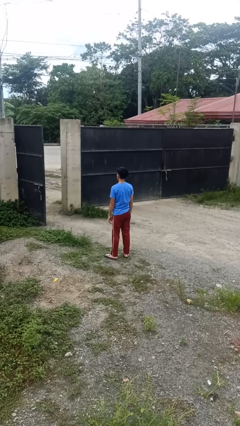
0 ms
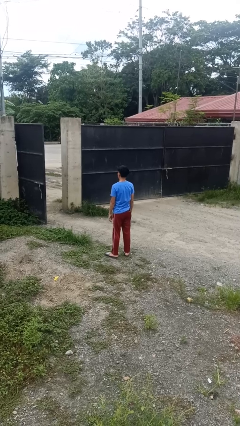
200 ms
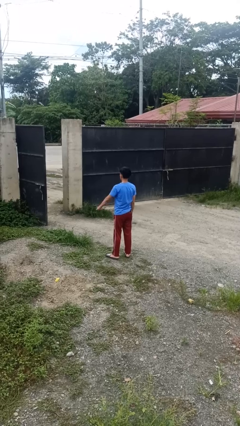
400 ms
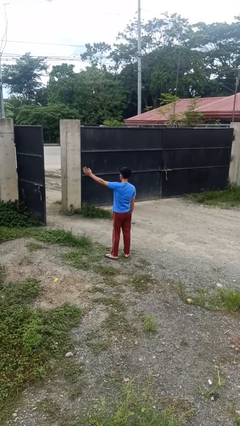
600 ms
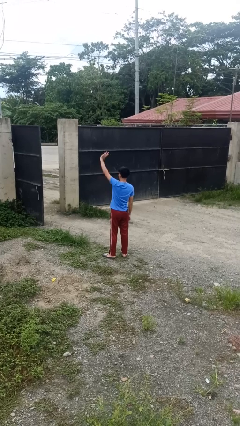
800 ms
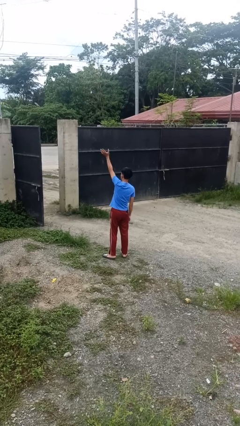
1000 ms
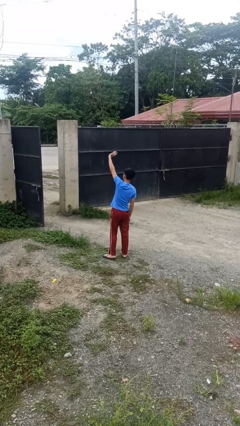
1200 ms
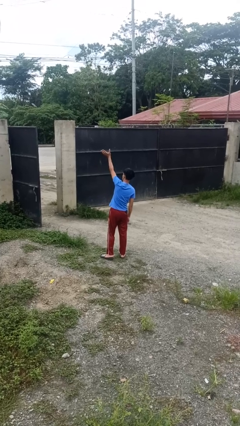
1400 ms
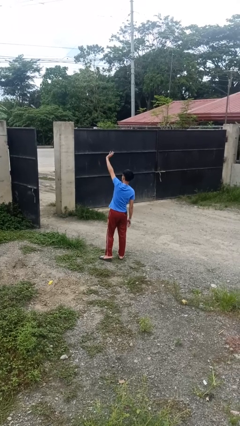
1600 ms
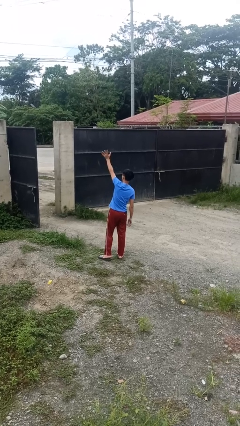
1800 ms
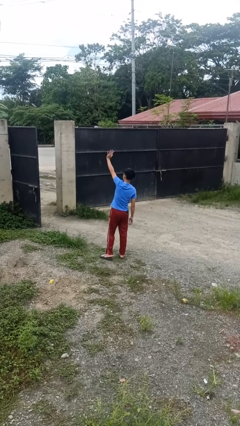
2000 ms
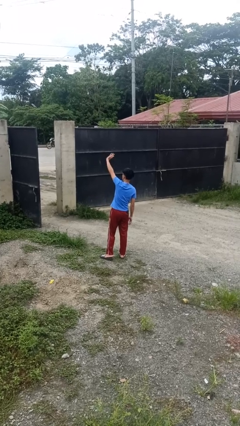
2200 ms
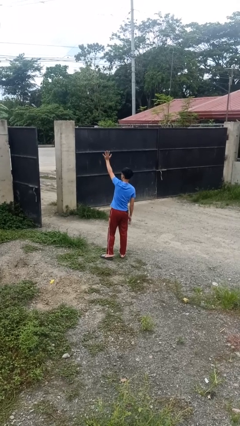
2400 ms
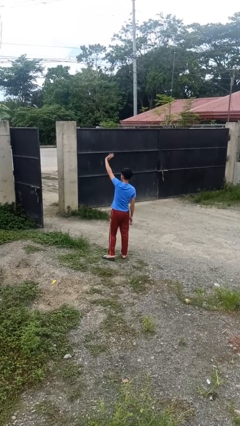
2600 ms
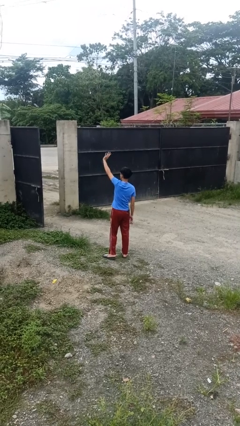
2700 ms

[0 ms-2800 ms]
person waves at person

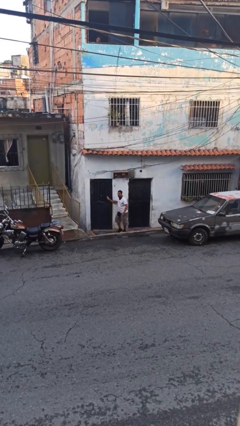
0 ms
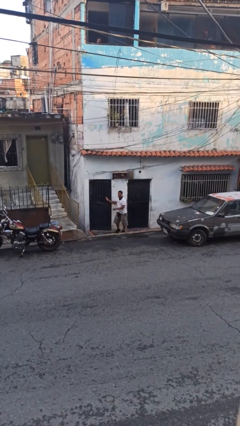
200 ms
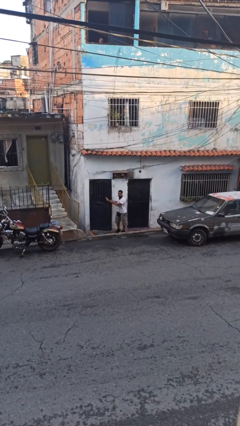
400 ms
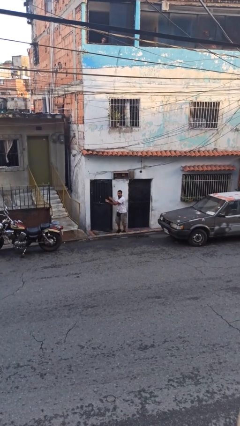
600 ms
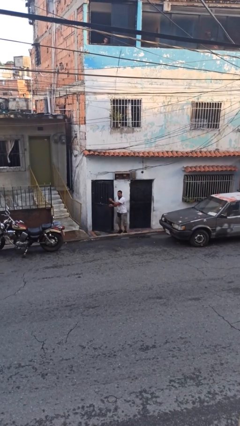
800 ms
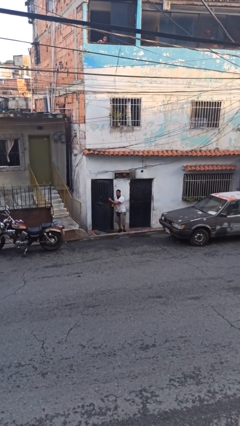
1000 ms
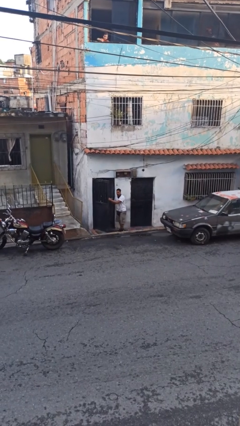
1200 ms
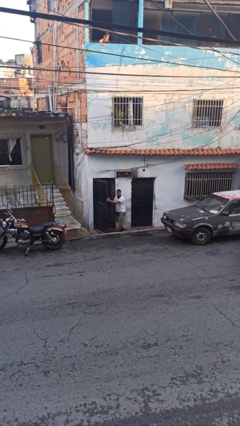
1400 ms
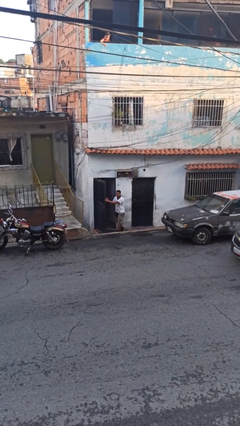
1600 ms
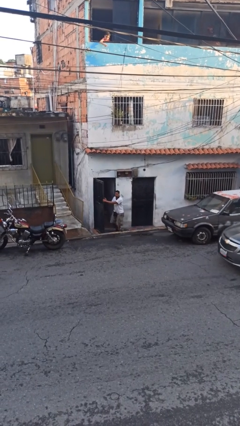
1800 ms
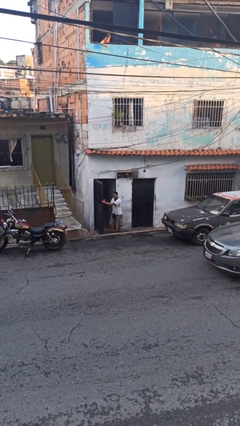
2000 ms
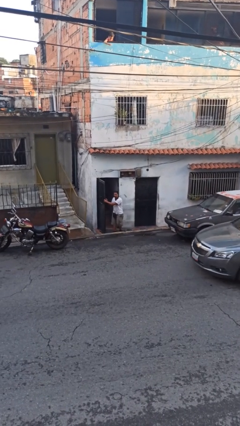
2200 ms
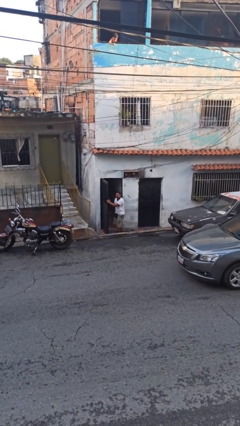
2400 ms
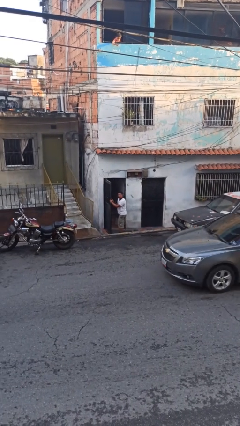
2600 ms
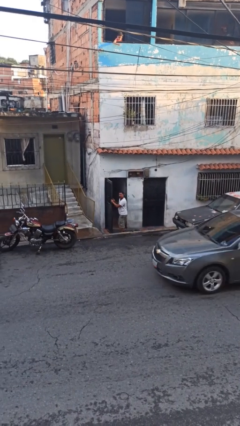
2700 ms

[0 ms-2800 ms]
person opens facility door

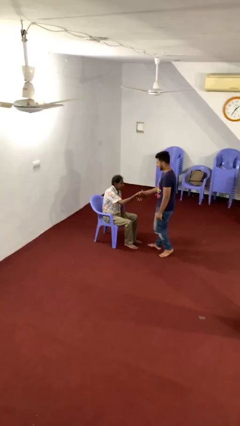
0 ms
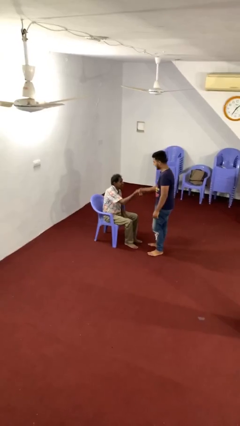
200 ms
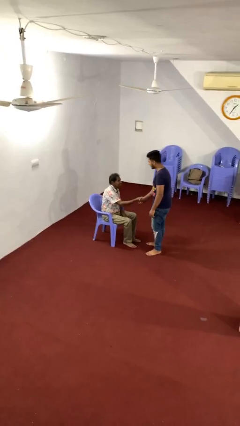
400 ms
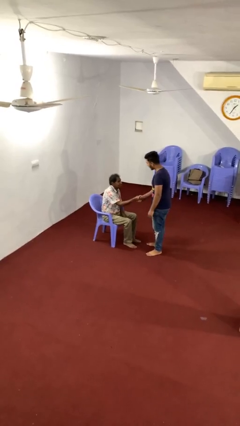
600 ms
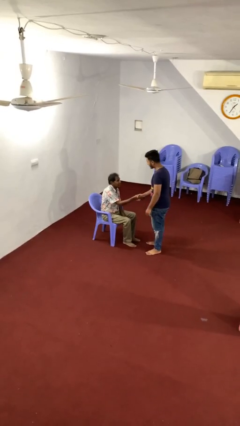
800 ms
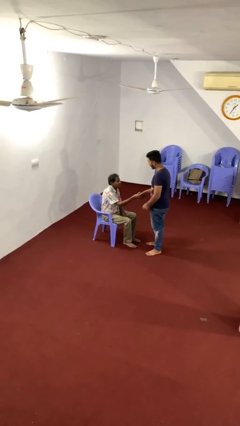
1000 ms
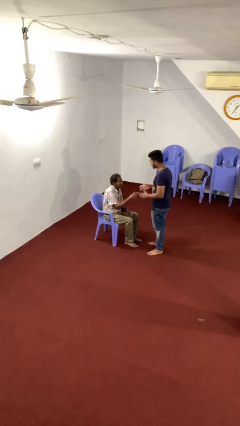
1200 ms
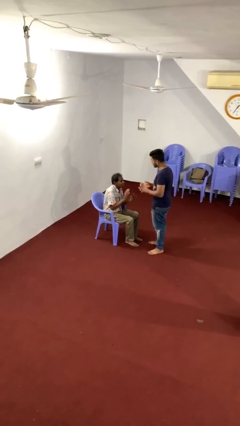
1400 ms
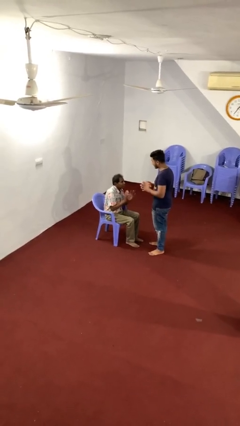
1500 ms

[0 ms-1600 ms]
person shakes hand

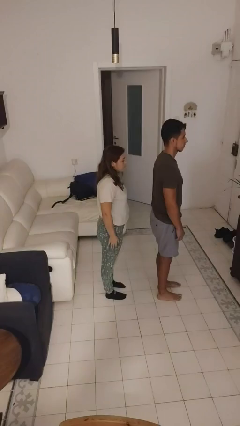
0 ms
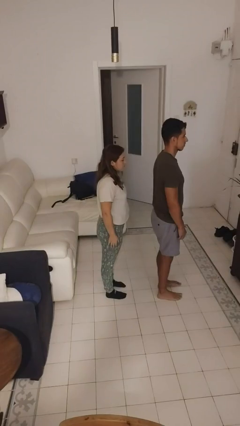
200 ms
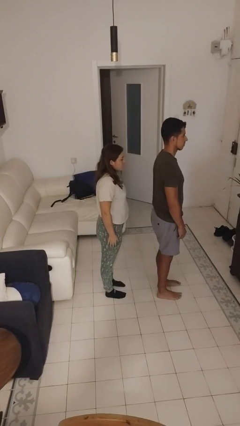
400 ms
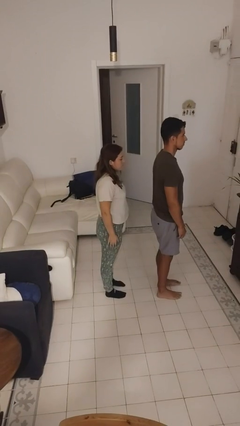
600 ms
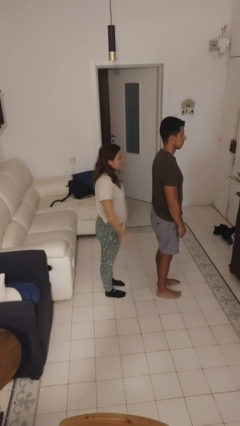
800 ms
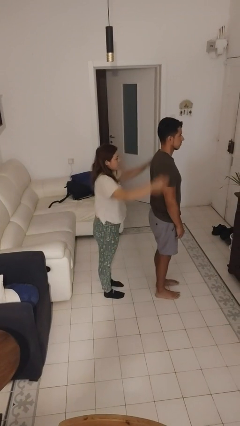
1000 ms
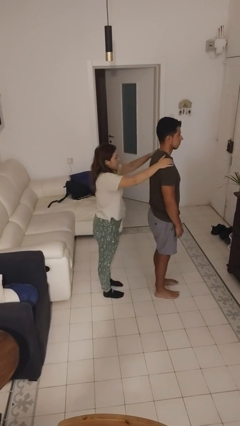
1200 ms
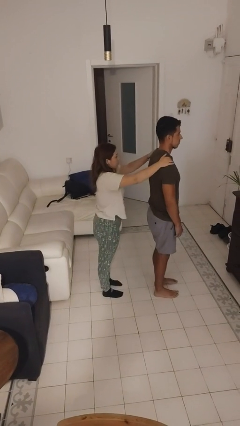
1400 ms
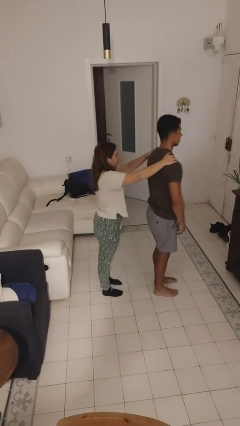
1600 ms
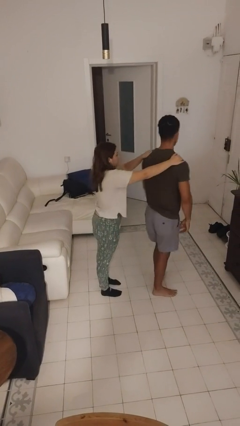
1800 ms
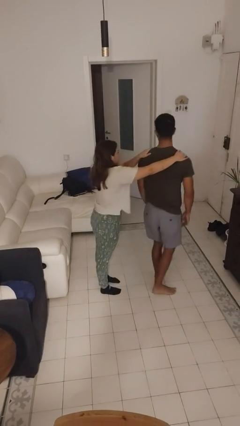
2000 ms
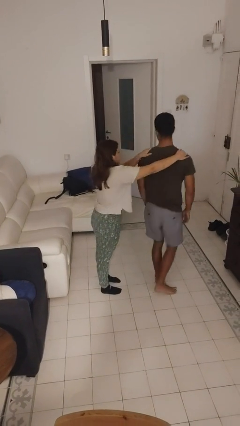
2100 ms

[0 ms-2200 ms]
person grabs person by shoulder

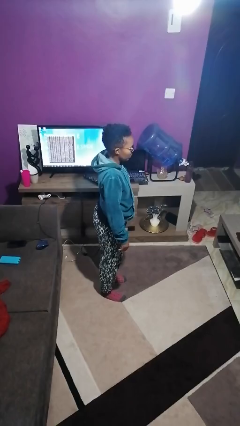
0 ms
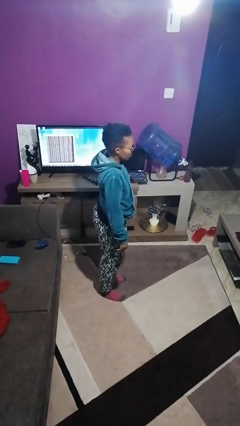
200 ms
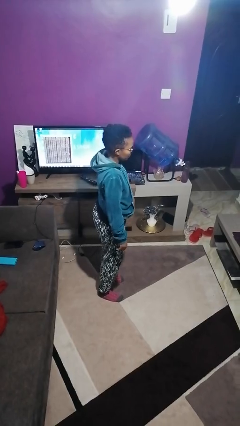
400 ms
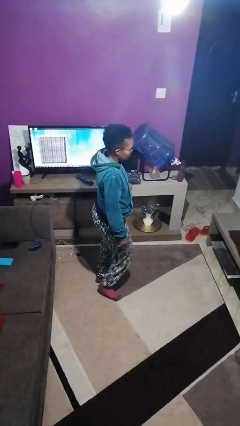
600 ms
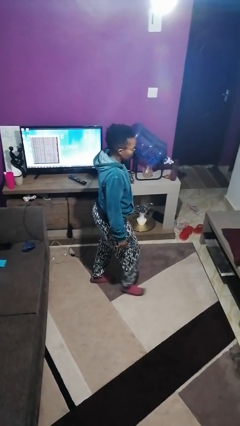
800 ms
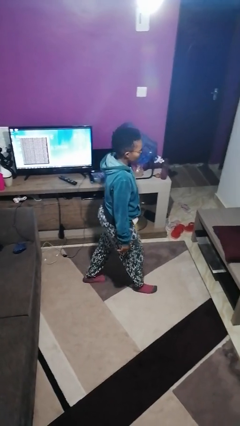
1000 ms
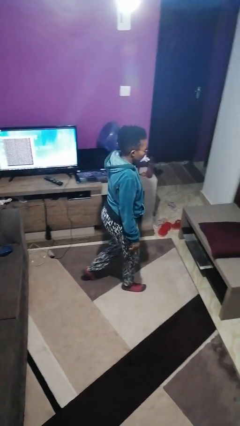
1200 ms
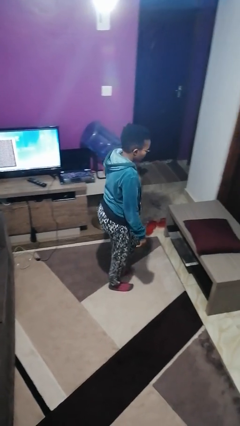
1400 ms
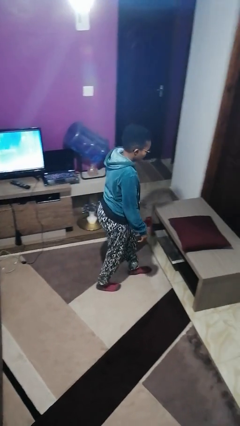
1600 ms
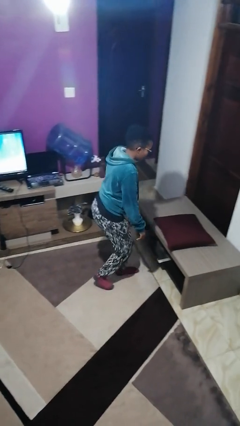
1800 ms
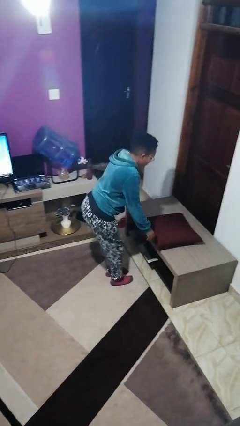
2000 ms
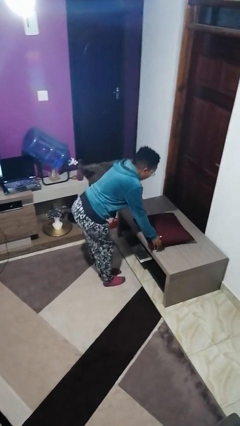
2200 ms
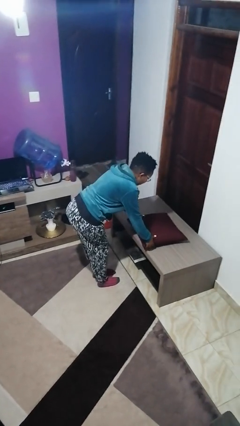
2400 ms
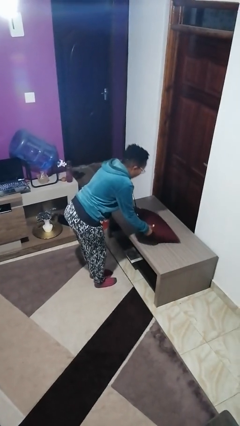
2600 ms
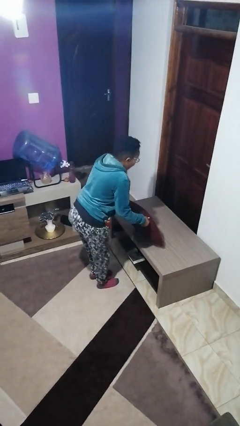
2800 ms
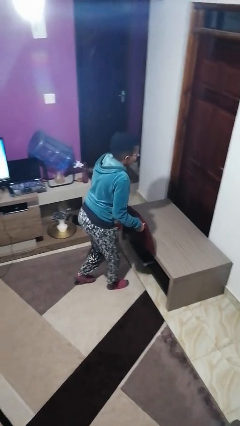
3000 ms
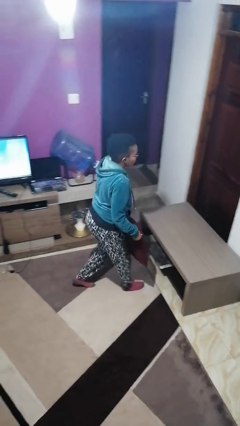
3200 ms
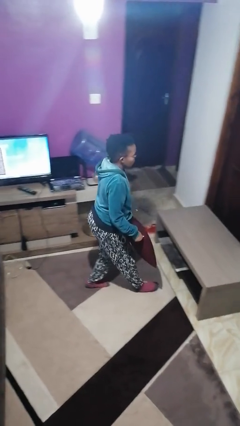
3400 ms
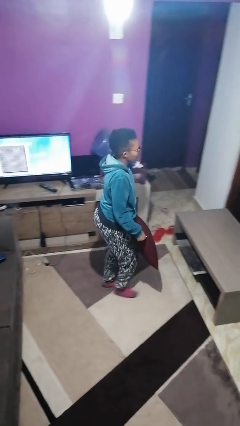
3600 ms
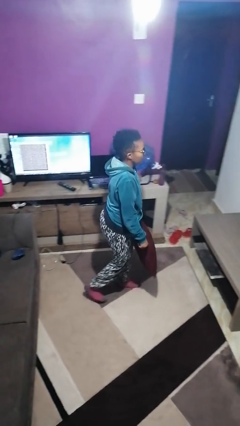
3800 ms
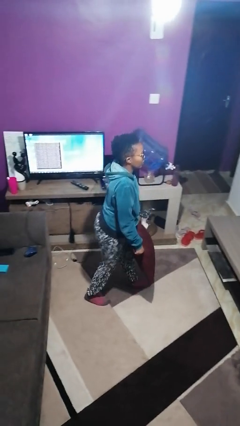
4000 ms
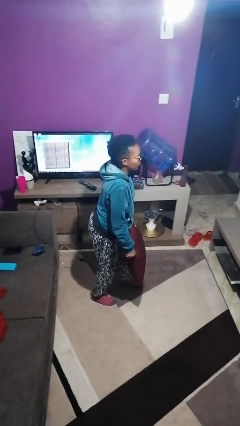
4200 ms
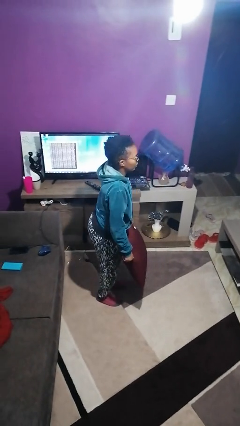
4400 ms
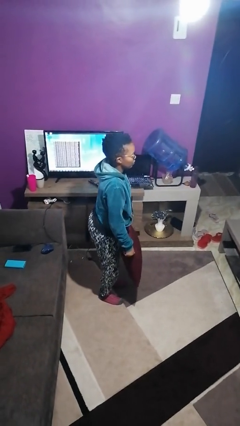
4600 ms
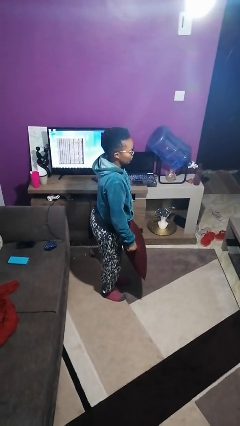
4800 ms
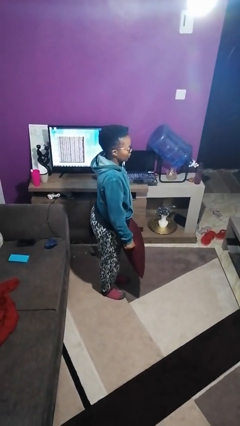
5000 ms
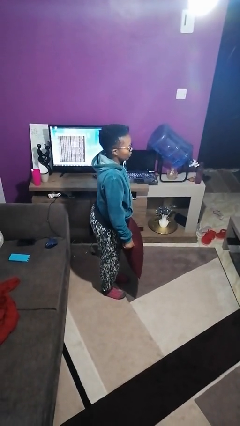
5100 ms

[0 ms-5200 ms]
person picks up object from table

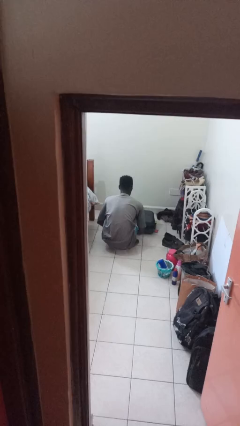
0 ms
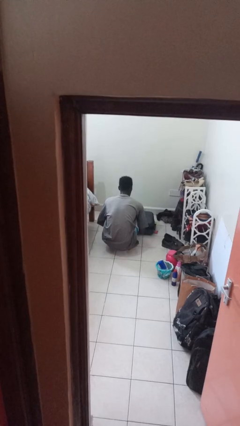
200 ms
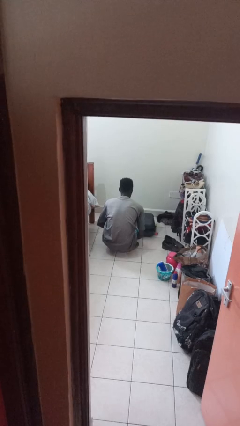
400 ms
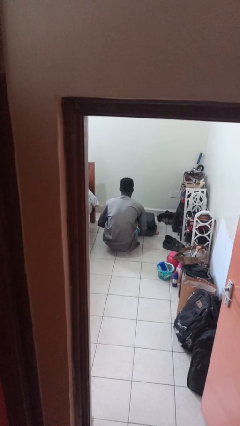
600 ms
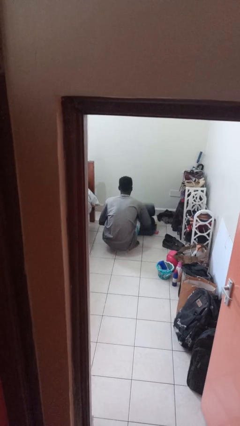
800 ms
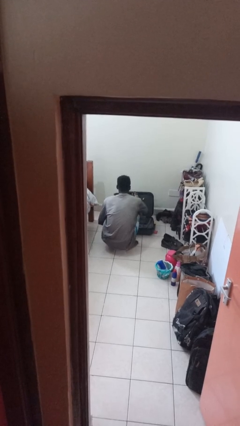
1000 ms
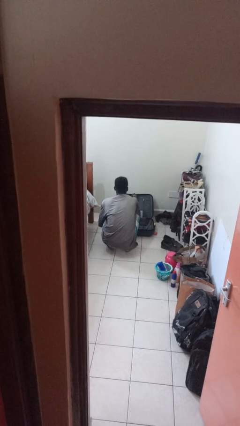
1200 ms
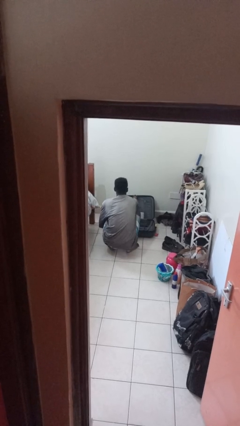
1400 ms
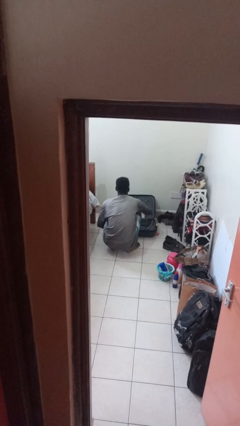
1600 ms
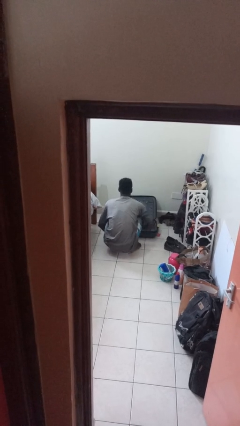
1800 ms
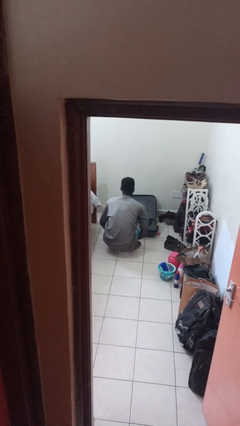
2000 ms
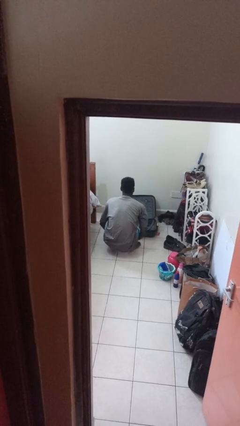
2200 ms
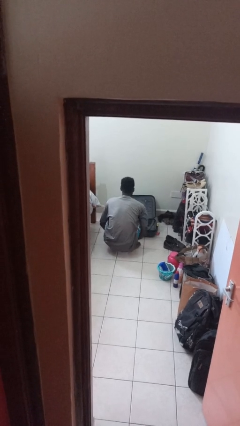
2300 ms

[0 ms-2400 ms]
person opens suitcase
